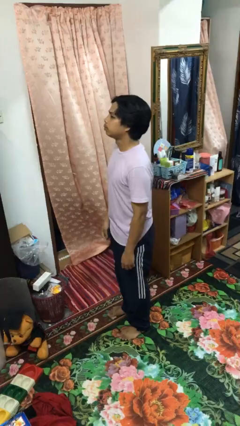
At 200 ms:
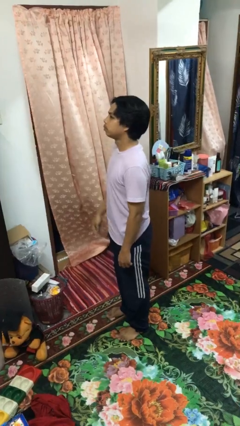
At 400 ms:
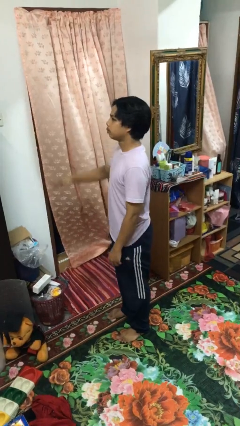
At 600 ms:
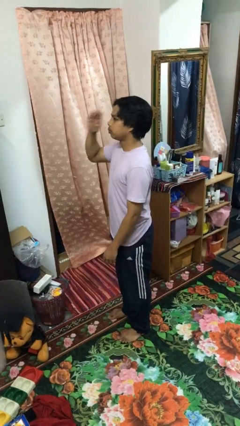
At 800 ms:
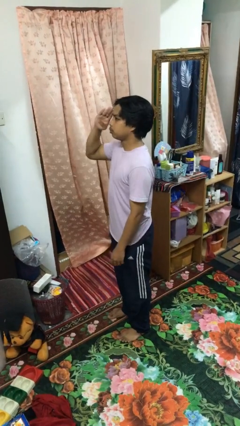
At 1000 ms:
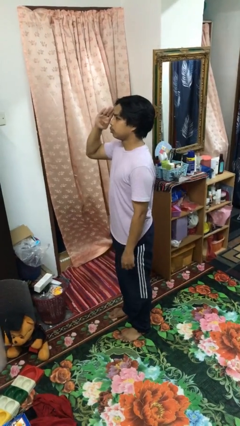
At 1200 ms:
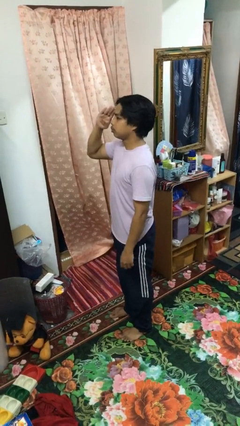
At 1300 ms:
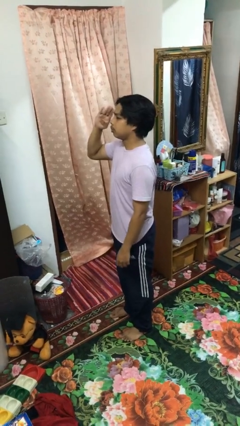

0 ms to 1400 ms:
person salutes

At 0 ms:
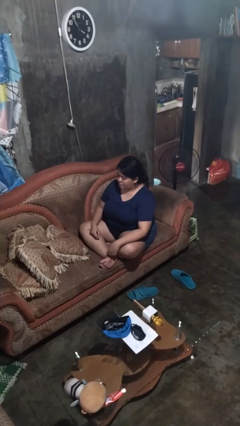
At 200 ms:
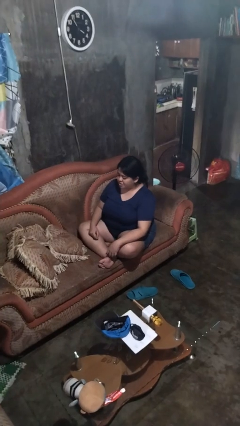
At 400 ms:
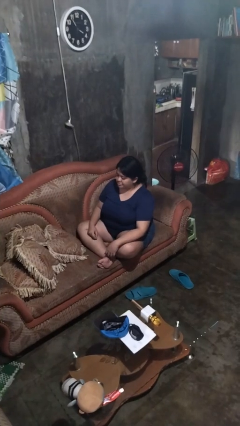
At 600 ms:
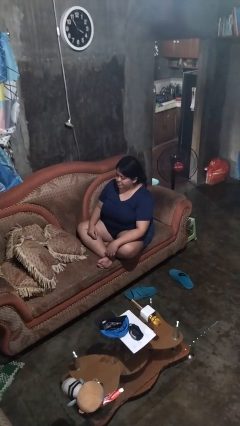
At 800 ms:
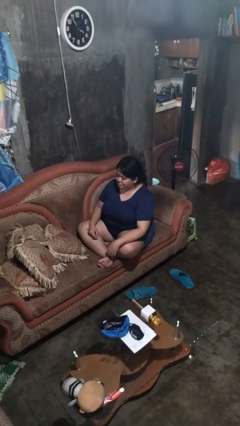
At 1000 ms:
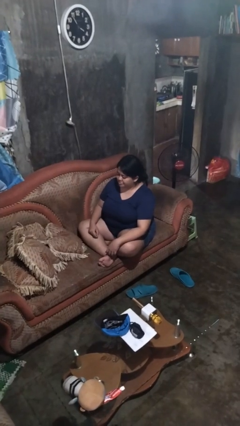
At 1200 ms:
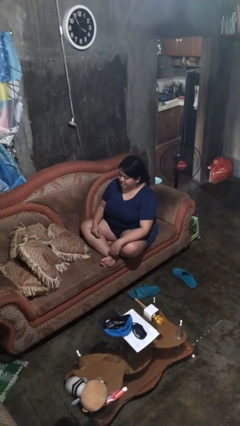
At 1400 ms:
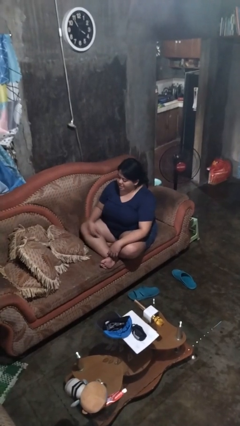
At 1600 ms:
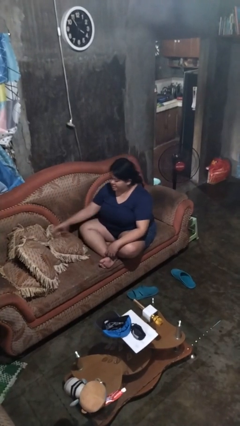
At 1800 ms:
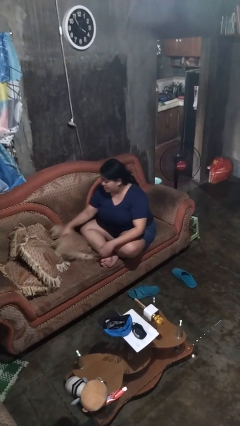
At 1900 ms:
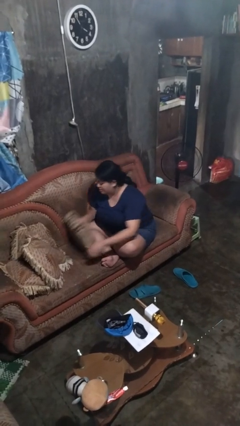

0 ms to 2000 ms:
person searches in couch

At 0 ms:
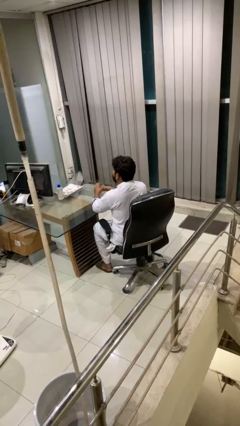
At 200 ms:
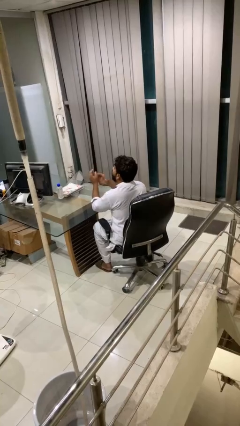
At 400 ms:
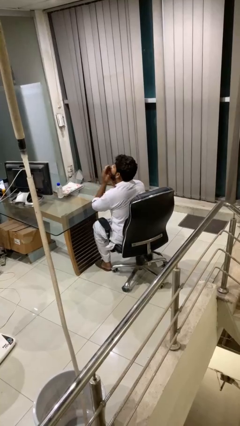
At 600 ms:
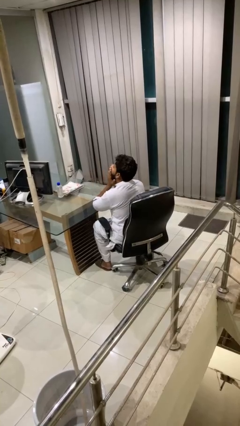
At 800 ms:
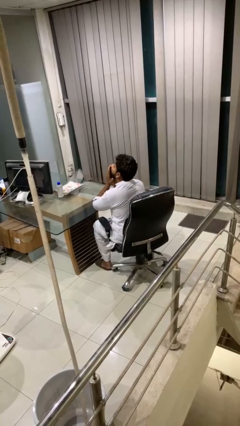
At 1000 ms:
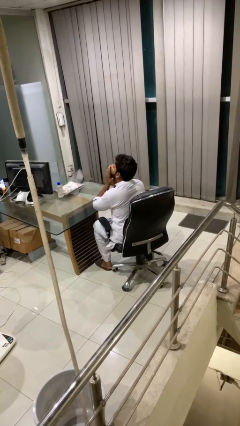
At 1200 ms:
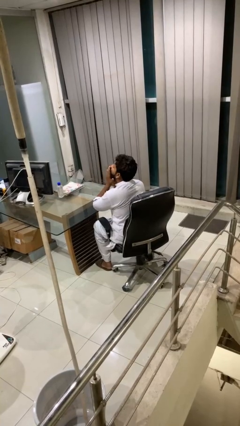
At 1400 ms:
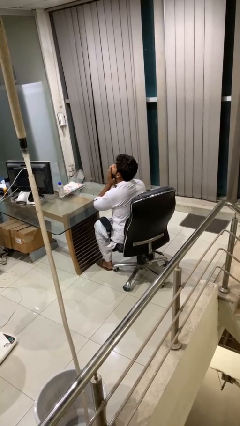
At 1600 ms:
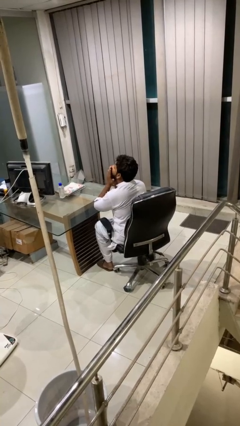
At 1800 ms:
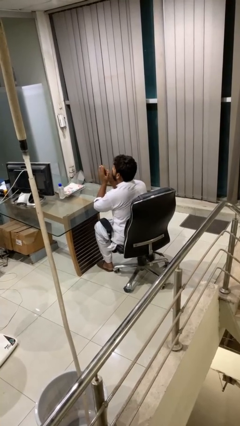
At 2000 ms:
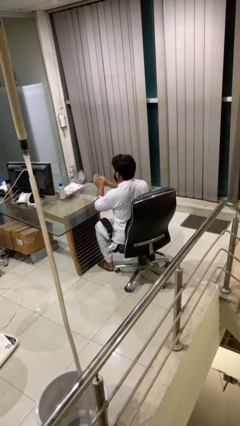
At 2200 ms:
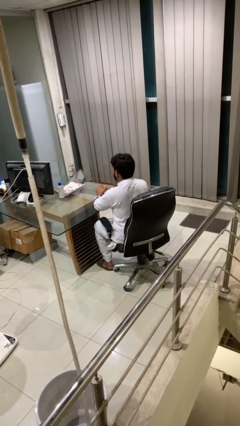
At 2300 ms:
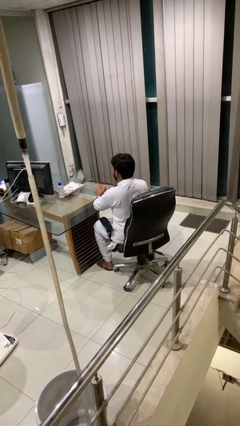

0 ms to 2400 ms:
person yawns

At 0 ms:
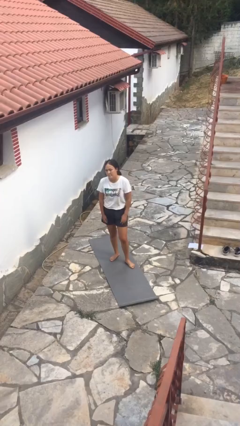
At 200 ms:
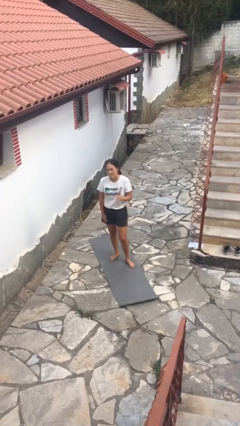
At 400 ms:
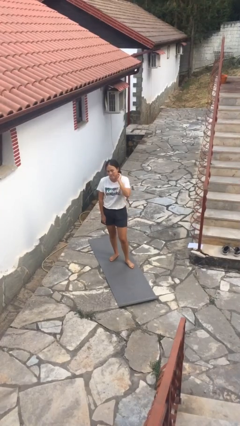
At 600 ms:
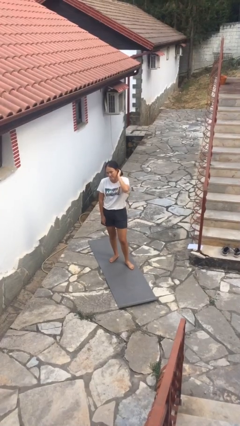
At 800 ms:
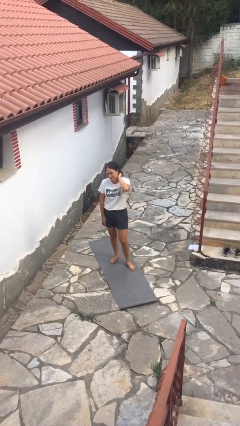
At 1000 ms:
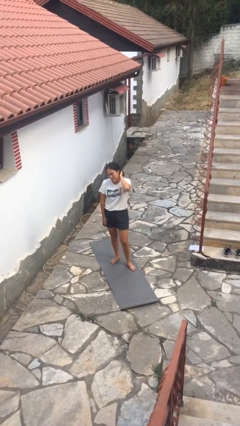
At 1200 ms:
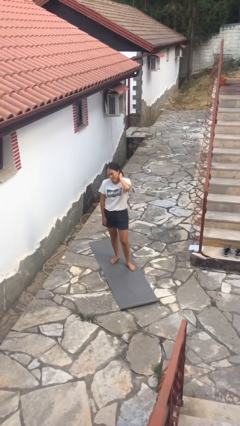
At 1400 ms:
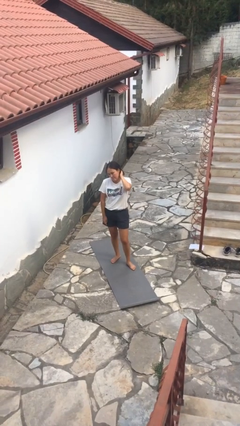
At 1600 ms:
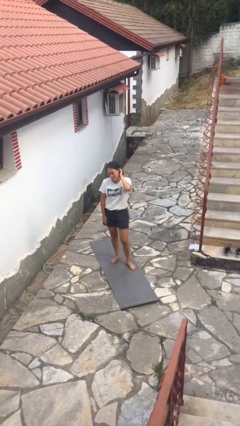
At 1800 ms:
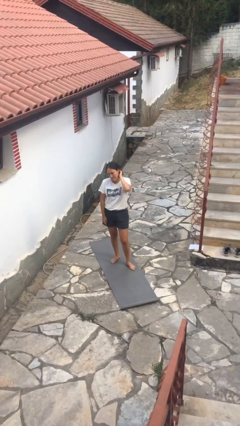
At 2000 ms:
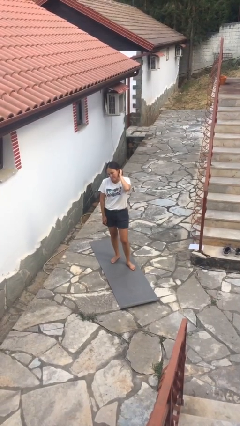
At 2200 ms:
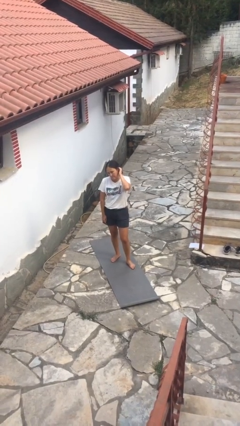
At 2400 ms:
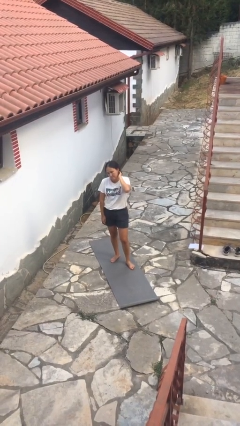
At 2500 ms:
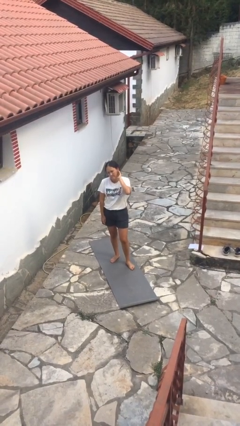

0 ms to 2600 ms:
person scratches face

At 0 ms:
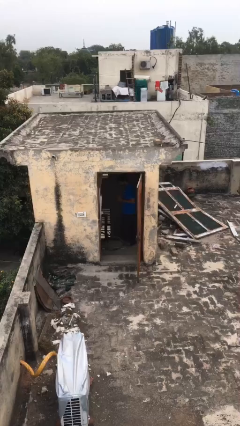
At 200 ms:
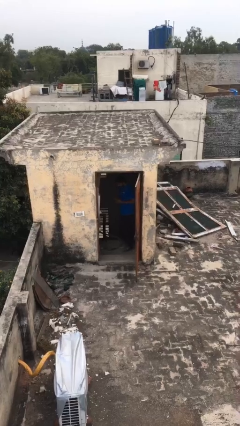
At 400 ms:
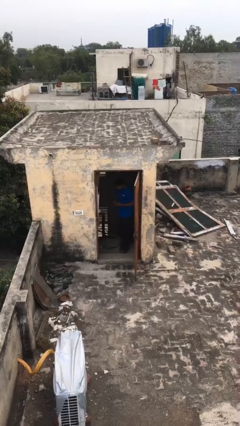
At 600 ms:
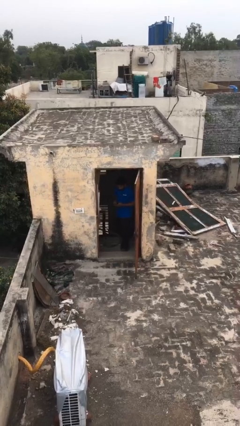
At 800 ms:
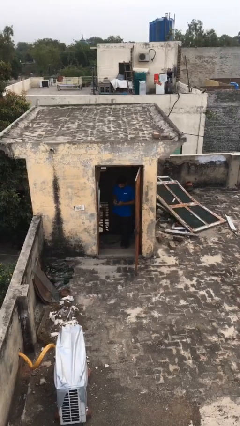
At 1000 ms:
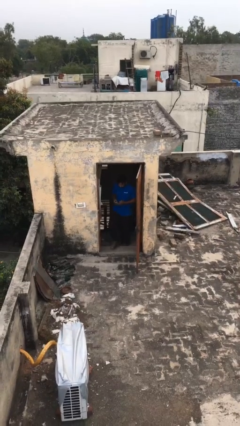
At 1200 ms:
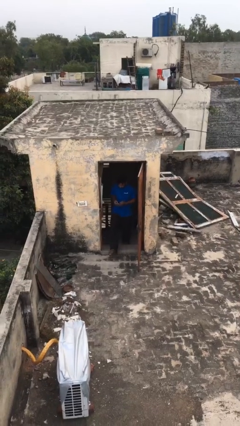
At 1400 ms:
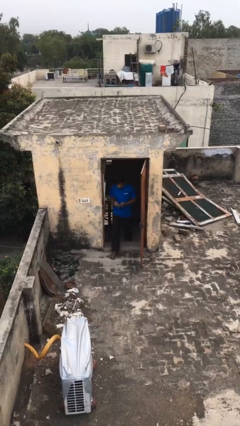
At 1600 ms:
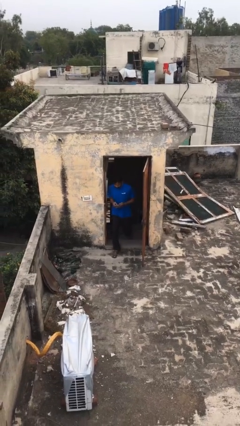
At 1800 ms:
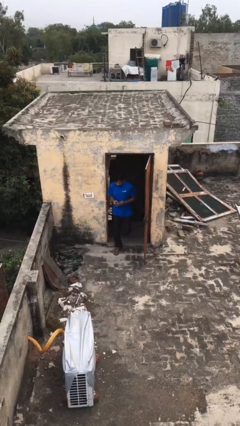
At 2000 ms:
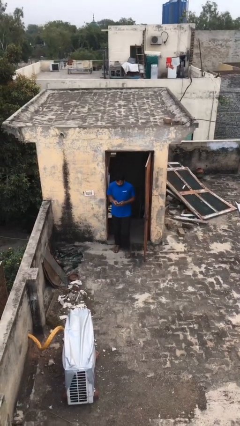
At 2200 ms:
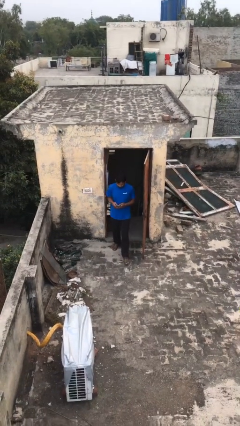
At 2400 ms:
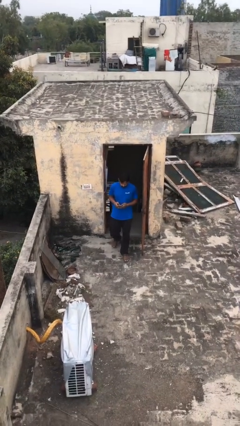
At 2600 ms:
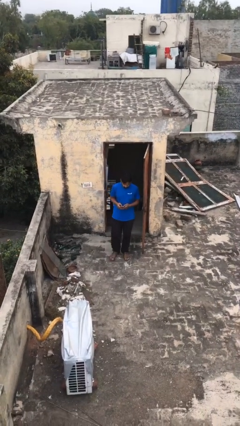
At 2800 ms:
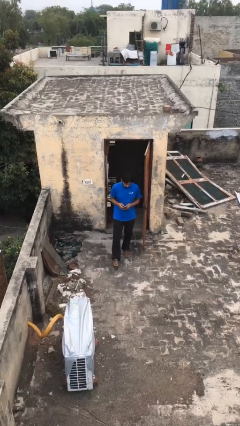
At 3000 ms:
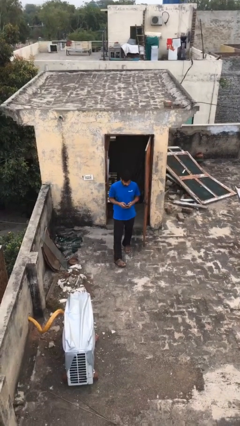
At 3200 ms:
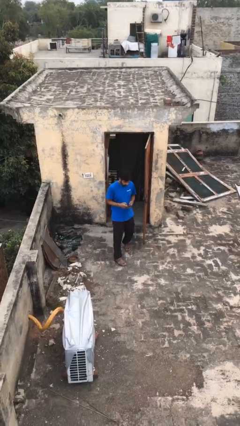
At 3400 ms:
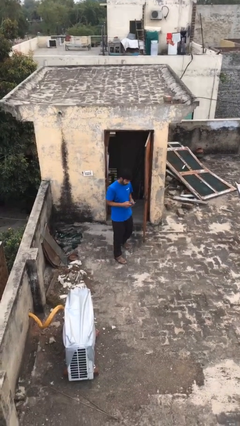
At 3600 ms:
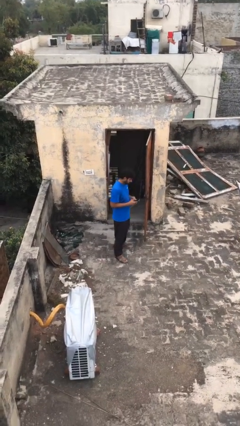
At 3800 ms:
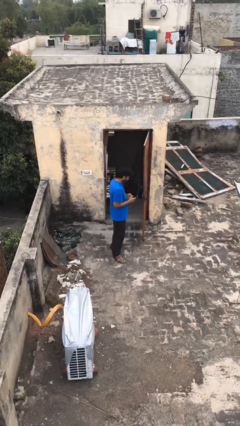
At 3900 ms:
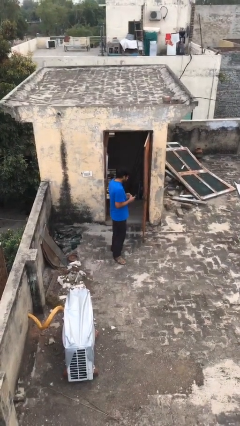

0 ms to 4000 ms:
person enters scene through structure

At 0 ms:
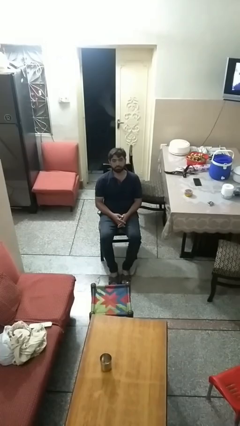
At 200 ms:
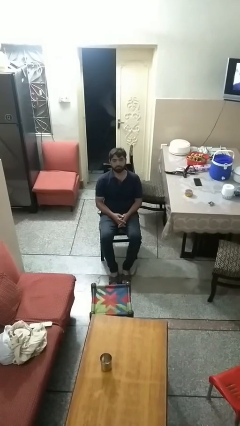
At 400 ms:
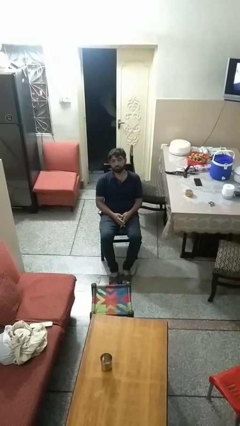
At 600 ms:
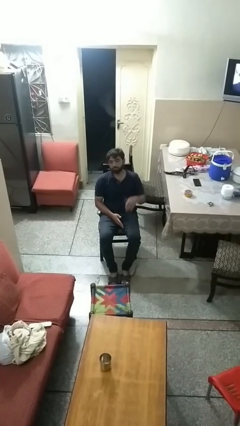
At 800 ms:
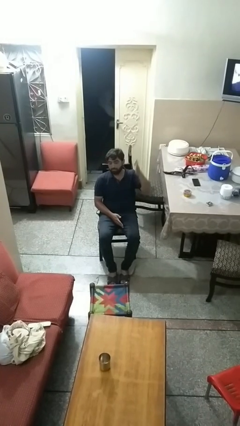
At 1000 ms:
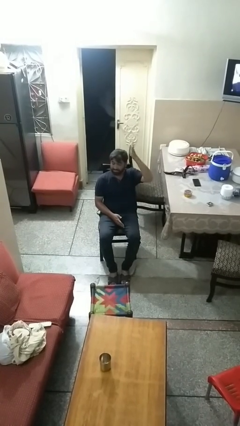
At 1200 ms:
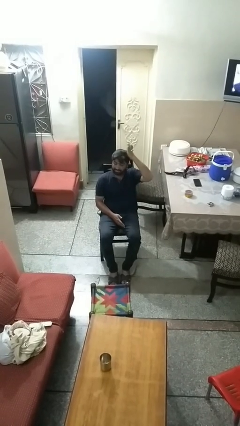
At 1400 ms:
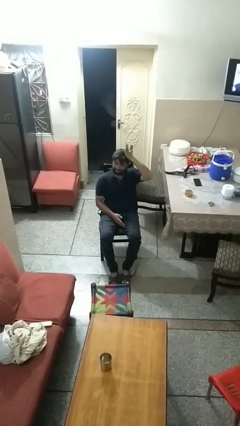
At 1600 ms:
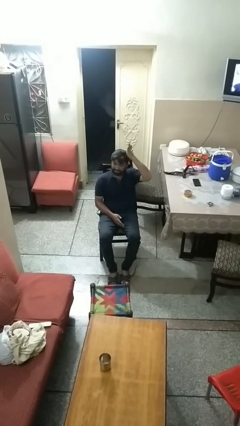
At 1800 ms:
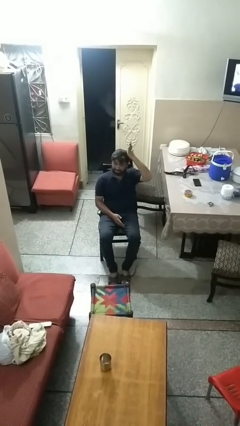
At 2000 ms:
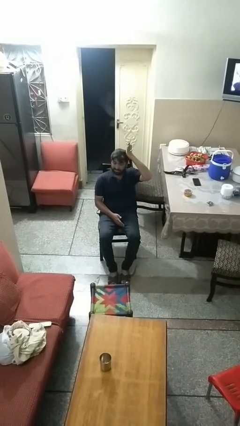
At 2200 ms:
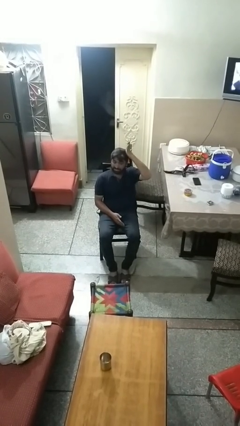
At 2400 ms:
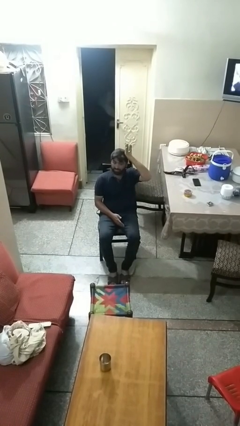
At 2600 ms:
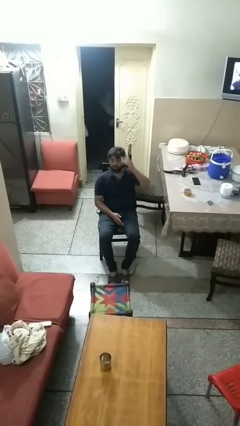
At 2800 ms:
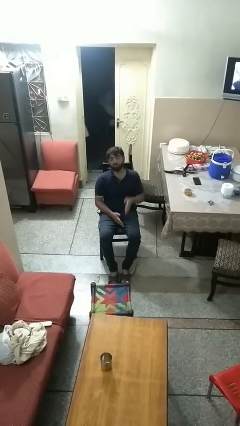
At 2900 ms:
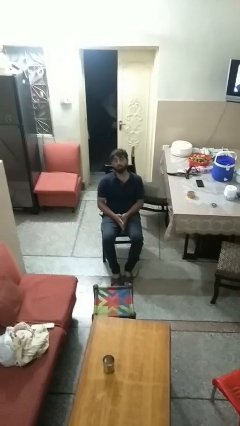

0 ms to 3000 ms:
person pats head

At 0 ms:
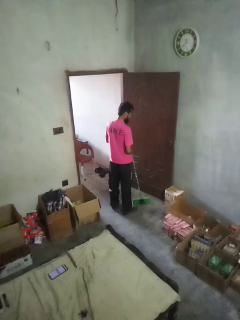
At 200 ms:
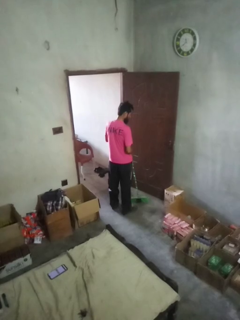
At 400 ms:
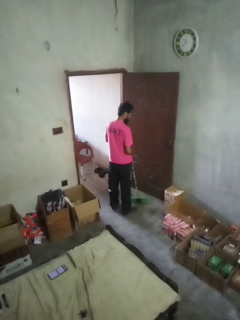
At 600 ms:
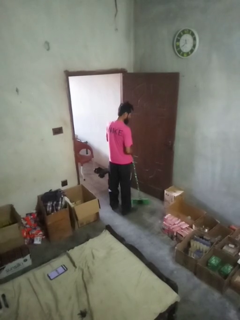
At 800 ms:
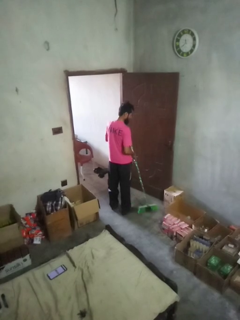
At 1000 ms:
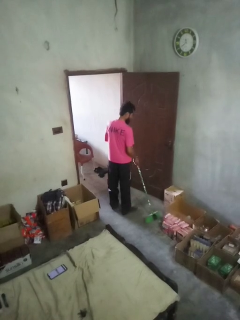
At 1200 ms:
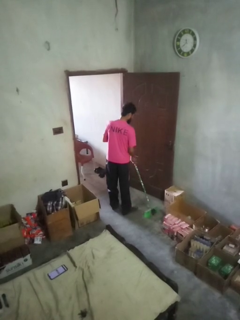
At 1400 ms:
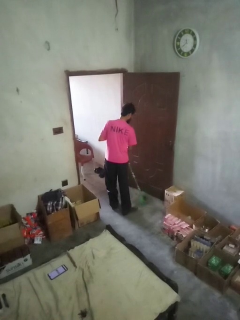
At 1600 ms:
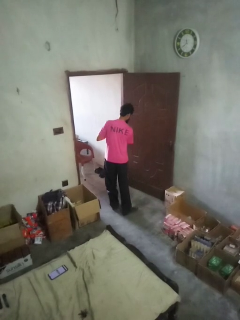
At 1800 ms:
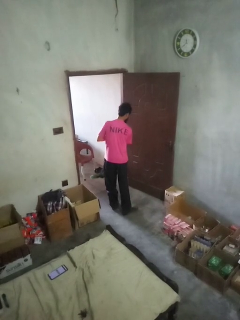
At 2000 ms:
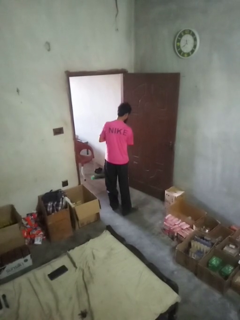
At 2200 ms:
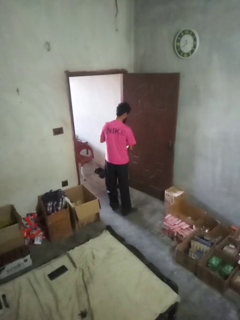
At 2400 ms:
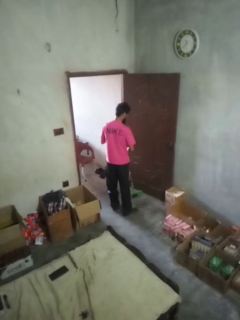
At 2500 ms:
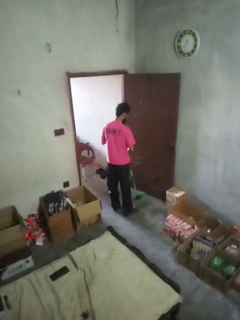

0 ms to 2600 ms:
person sweeps floor
